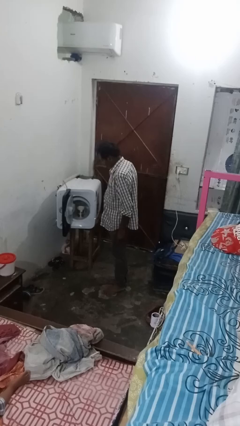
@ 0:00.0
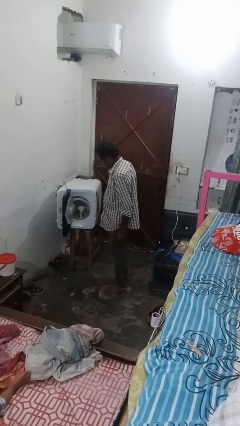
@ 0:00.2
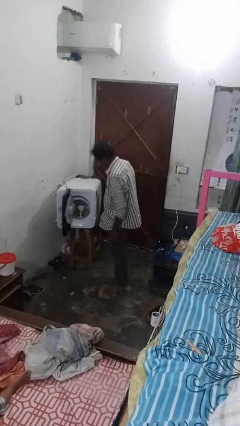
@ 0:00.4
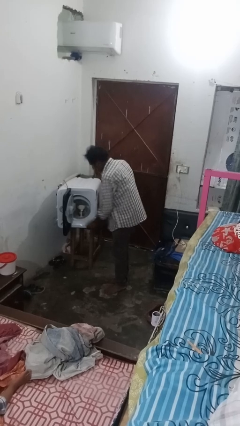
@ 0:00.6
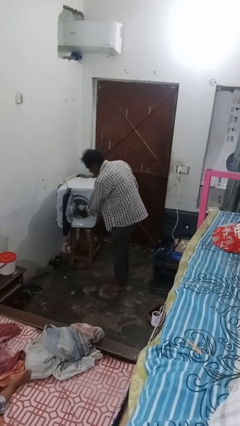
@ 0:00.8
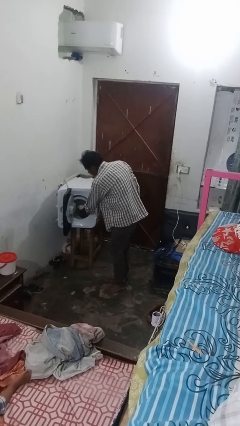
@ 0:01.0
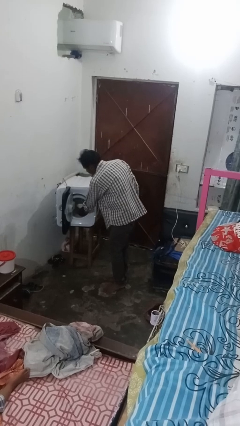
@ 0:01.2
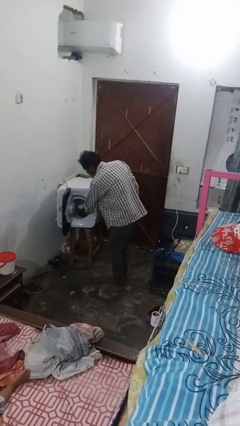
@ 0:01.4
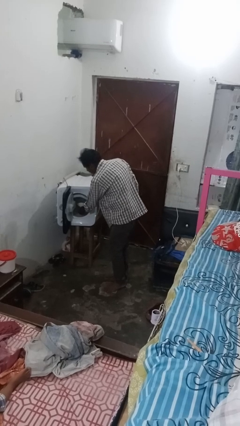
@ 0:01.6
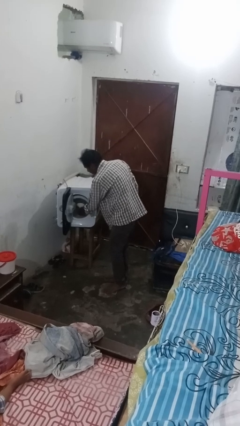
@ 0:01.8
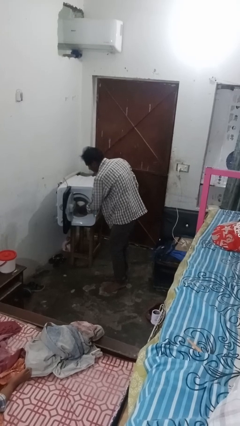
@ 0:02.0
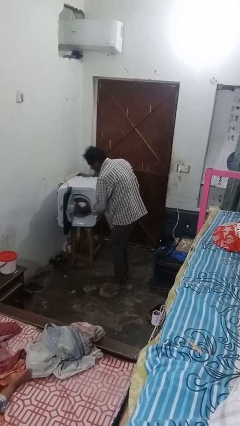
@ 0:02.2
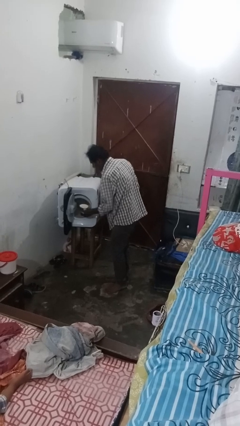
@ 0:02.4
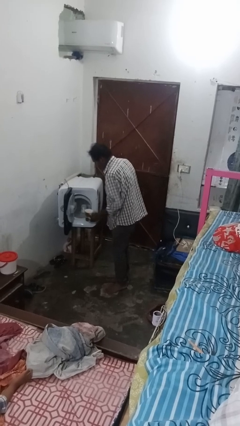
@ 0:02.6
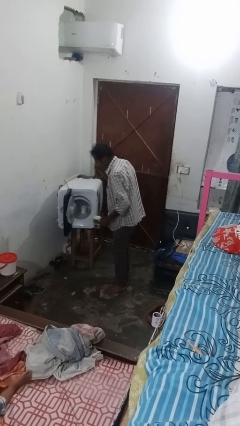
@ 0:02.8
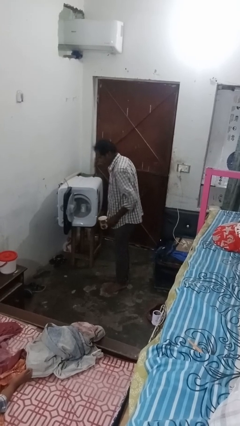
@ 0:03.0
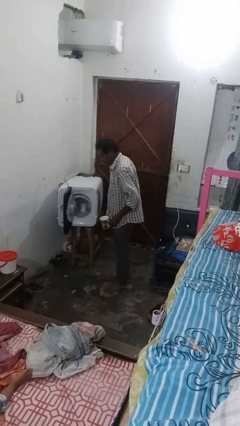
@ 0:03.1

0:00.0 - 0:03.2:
person unloads dishwasher

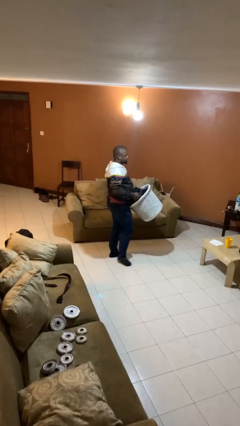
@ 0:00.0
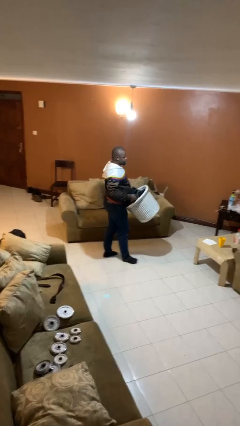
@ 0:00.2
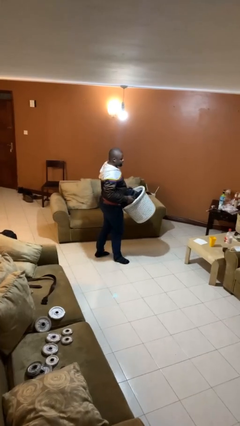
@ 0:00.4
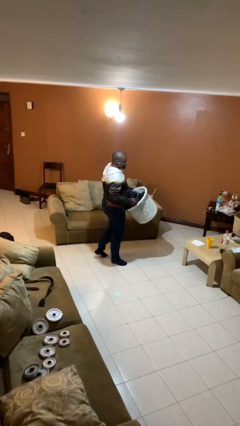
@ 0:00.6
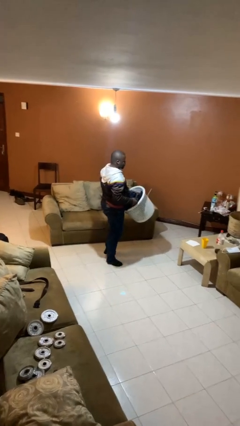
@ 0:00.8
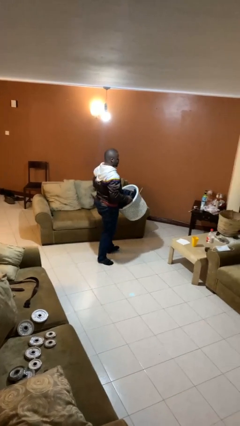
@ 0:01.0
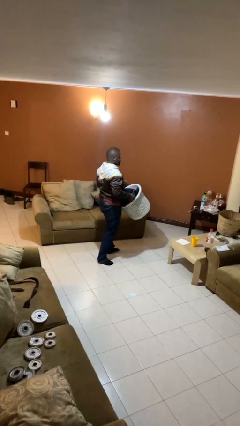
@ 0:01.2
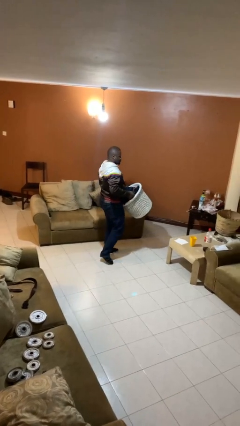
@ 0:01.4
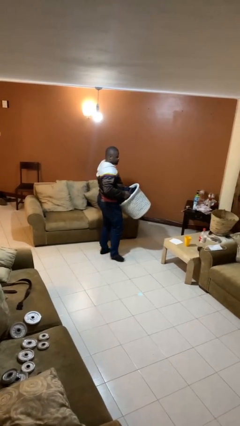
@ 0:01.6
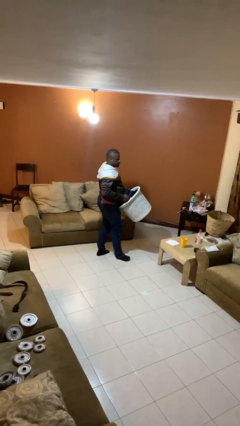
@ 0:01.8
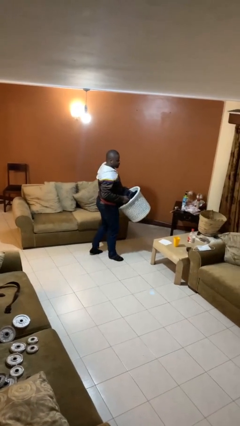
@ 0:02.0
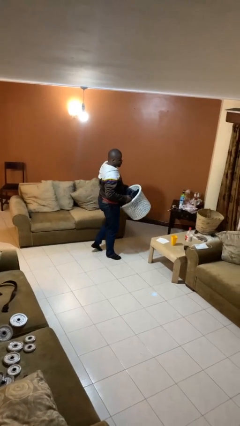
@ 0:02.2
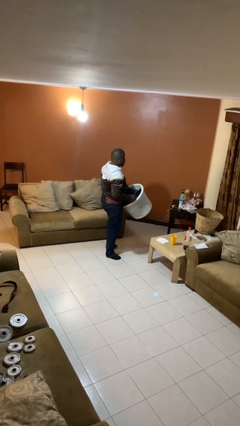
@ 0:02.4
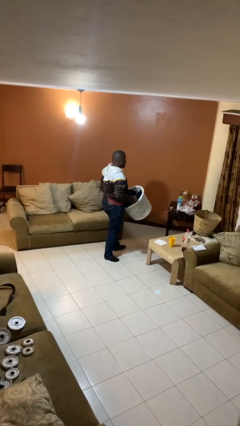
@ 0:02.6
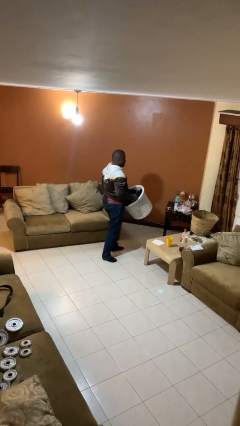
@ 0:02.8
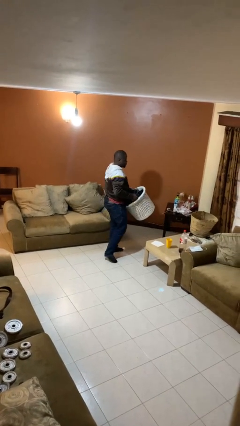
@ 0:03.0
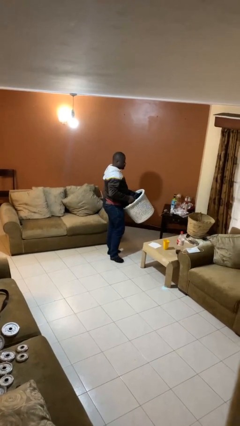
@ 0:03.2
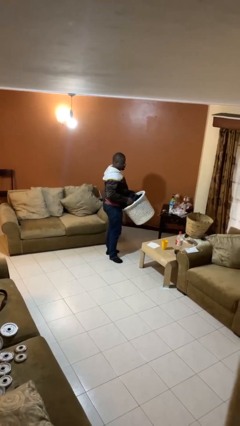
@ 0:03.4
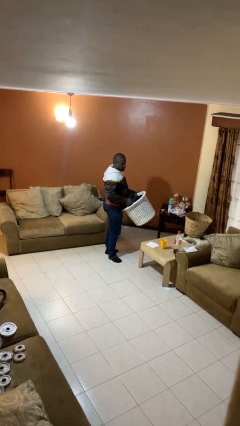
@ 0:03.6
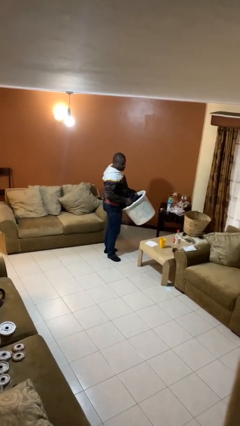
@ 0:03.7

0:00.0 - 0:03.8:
person carries laundry basket

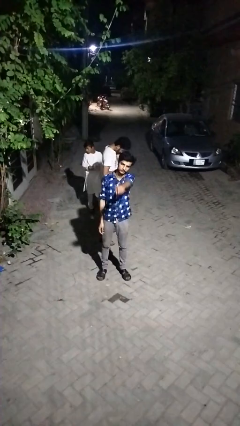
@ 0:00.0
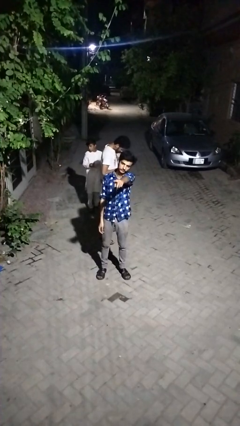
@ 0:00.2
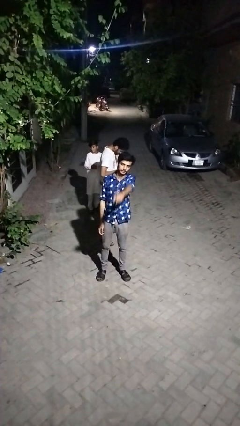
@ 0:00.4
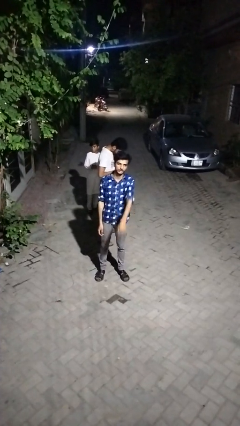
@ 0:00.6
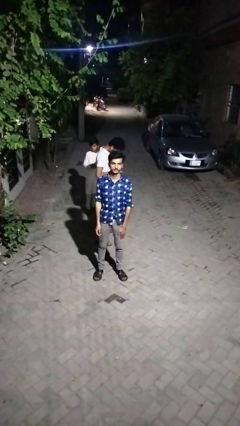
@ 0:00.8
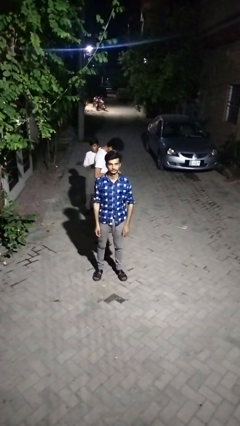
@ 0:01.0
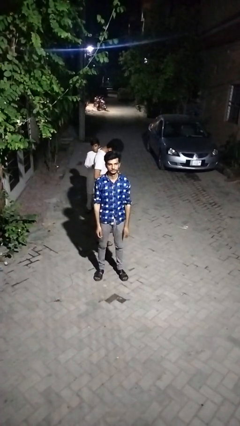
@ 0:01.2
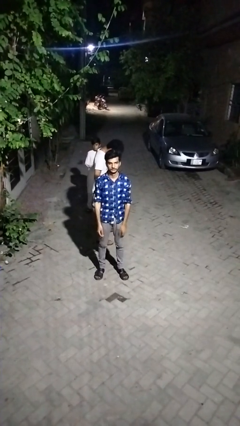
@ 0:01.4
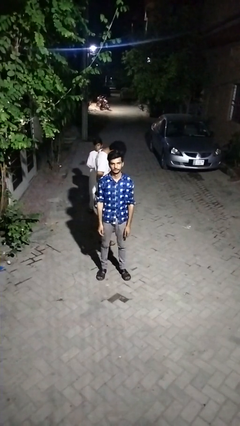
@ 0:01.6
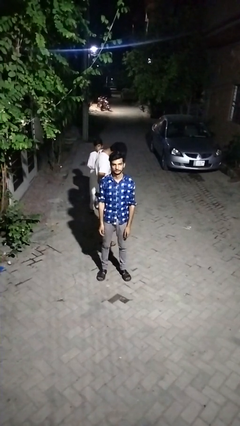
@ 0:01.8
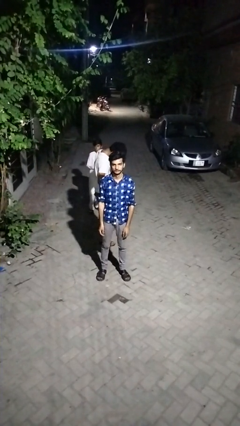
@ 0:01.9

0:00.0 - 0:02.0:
person points at person

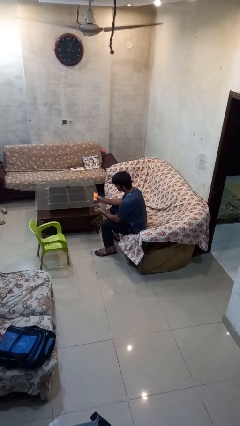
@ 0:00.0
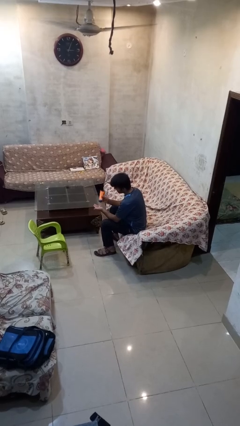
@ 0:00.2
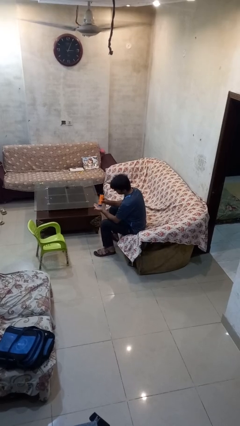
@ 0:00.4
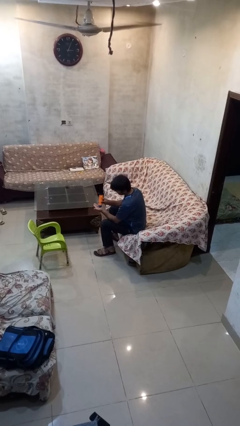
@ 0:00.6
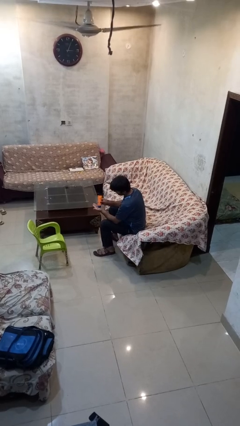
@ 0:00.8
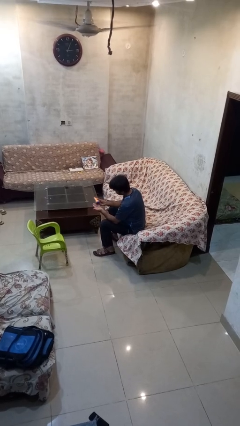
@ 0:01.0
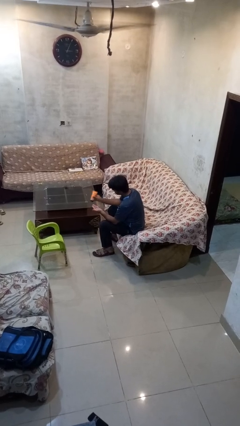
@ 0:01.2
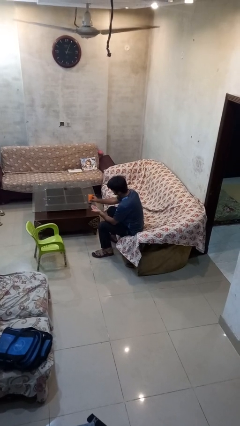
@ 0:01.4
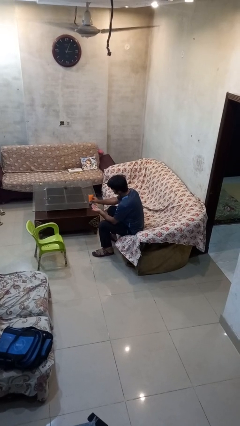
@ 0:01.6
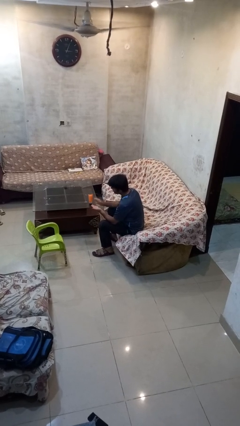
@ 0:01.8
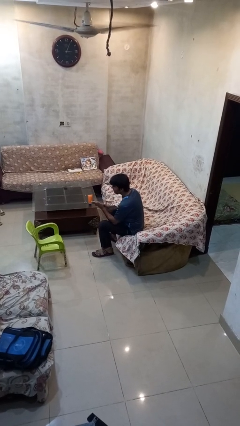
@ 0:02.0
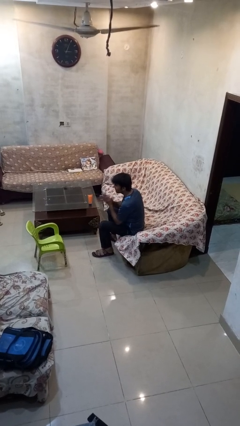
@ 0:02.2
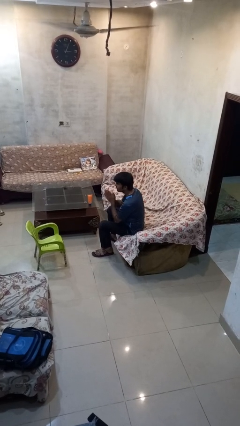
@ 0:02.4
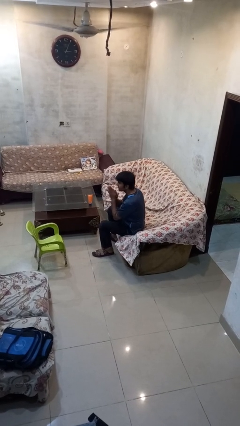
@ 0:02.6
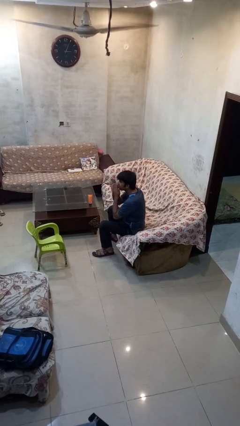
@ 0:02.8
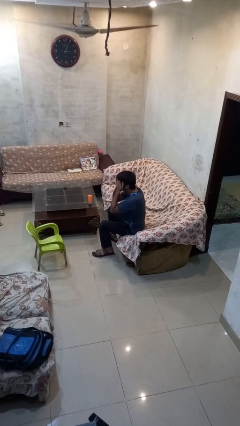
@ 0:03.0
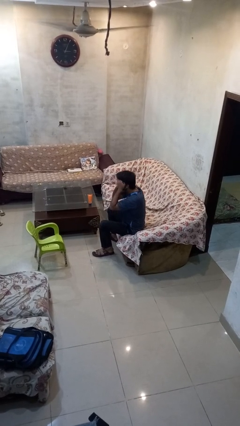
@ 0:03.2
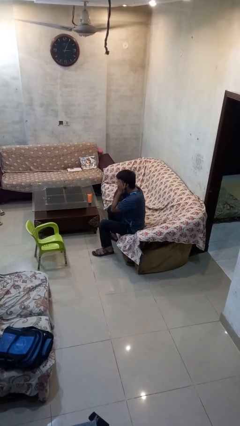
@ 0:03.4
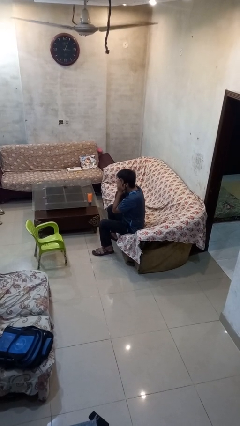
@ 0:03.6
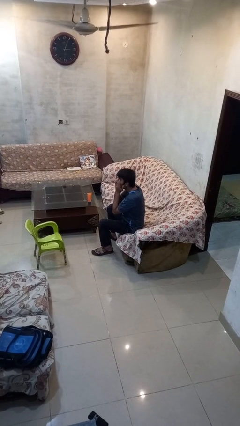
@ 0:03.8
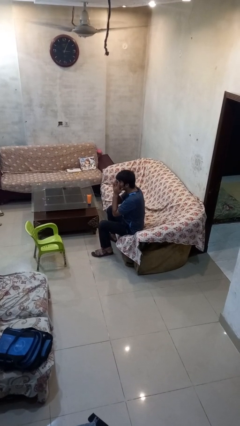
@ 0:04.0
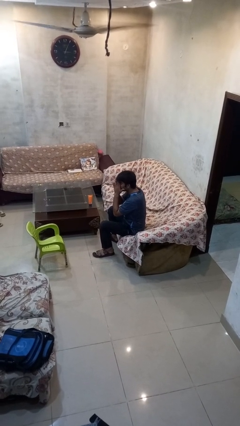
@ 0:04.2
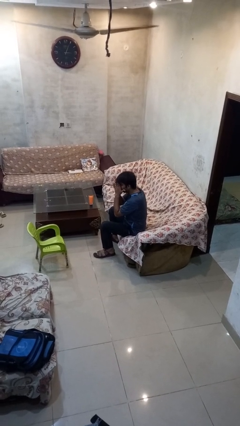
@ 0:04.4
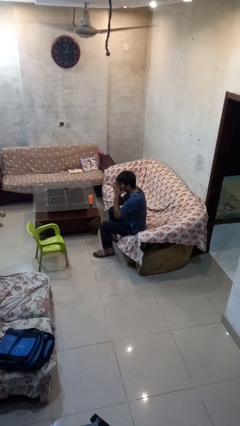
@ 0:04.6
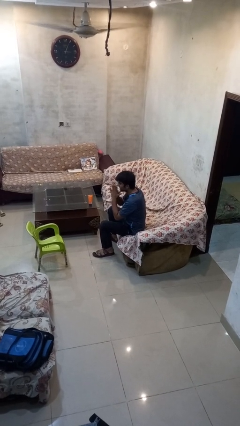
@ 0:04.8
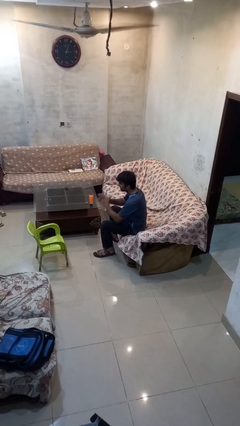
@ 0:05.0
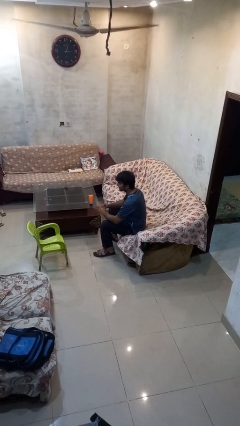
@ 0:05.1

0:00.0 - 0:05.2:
person applies sunscreen

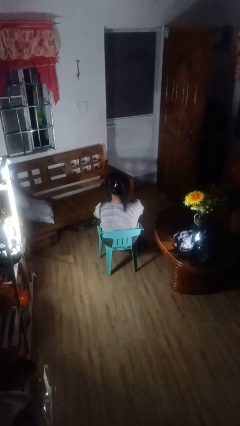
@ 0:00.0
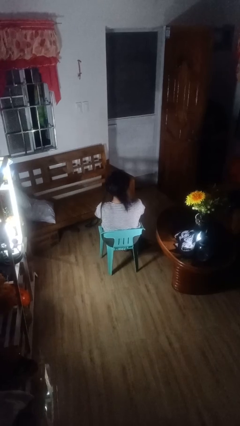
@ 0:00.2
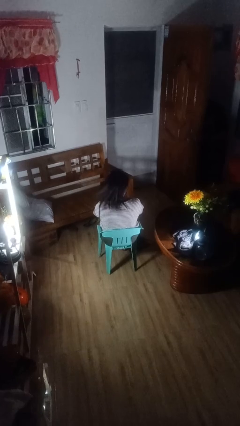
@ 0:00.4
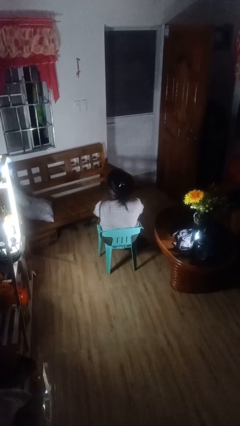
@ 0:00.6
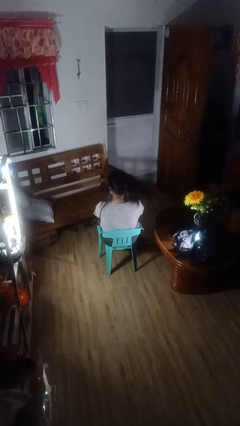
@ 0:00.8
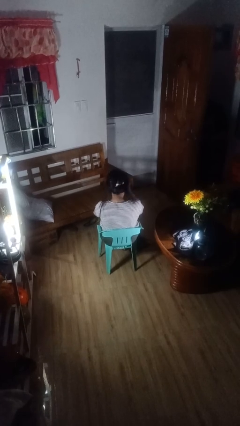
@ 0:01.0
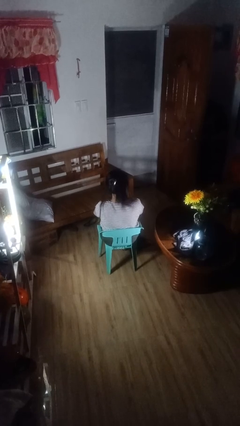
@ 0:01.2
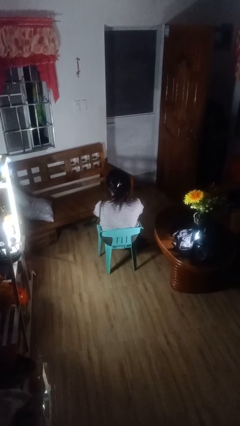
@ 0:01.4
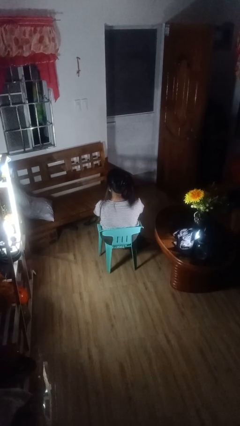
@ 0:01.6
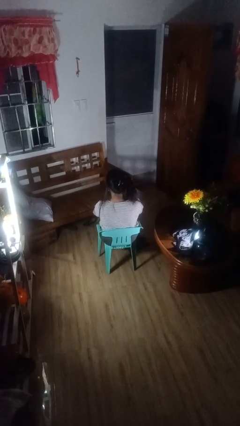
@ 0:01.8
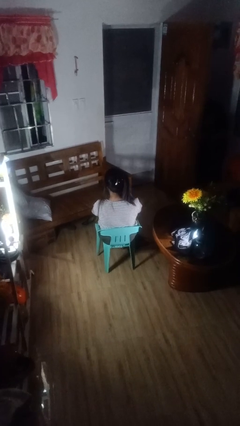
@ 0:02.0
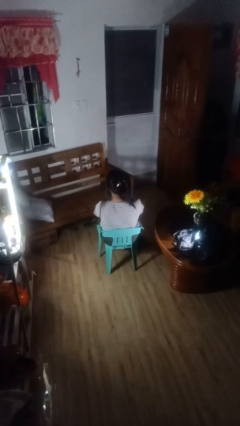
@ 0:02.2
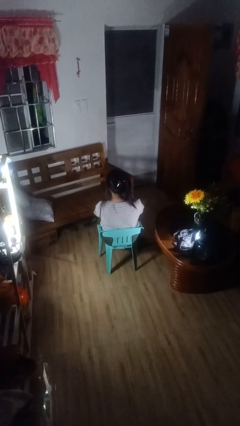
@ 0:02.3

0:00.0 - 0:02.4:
person shakes head

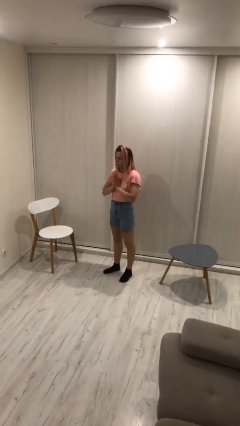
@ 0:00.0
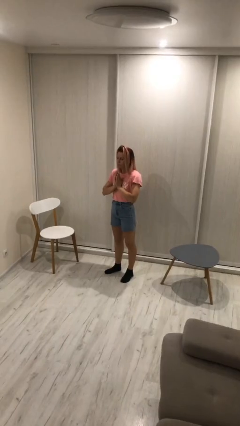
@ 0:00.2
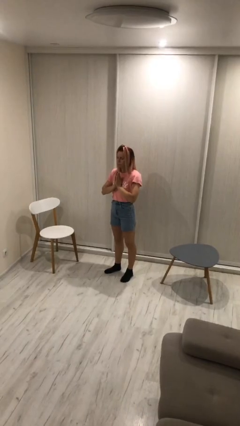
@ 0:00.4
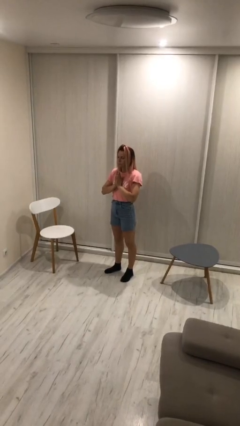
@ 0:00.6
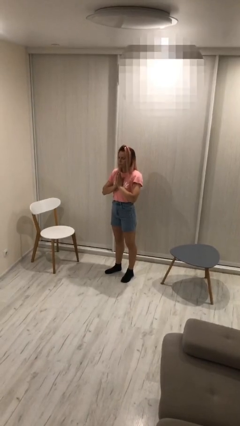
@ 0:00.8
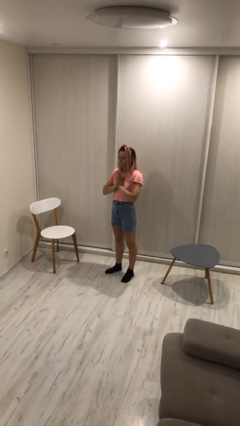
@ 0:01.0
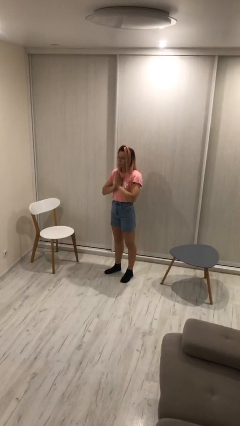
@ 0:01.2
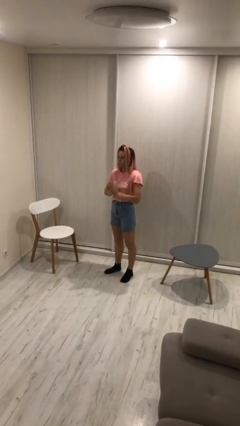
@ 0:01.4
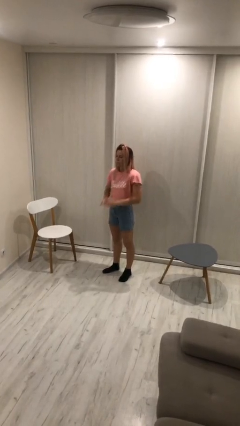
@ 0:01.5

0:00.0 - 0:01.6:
person prays
